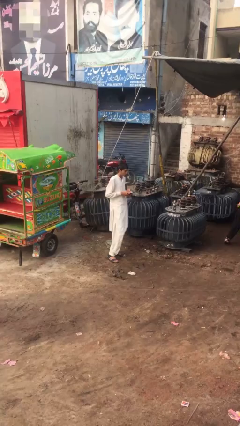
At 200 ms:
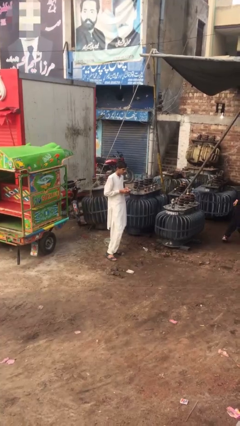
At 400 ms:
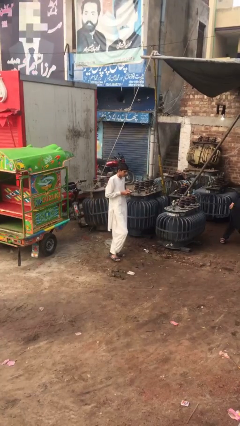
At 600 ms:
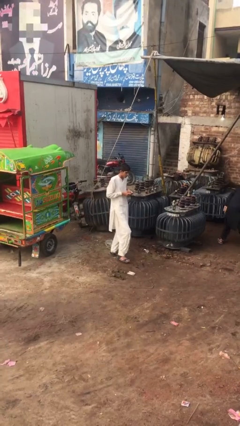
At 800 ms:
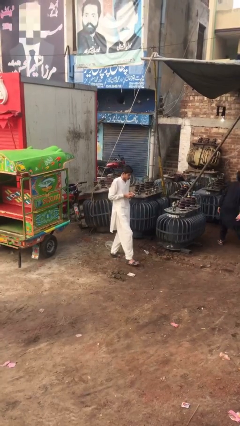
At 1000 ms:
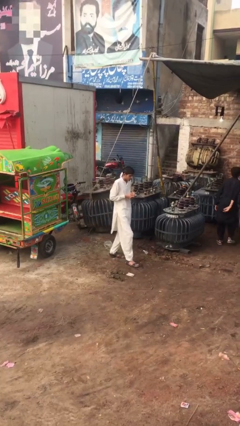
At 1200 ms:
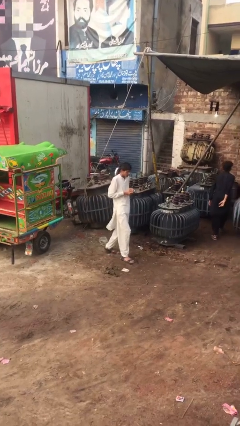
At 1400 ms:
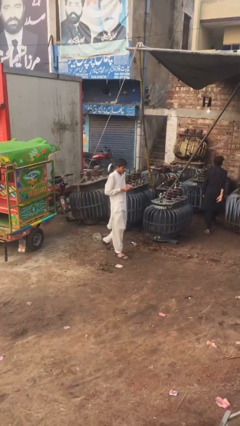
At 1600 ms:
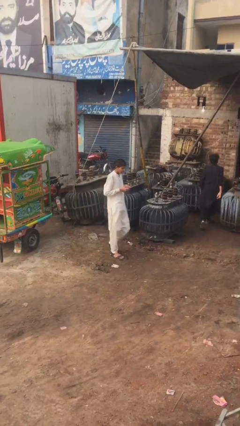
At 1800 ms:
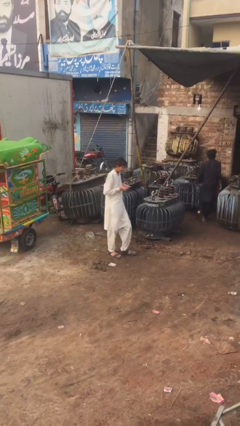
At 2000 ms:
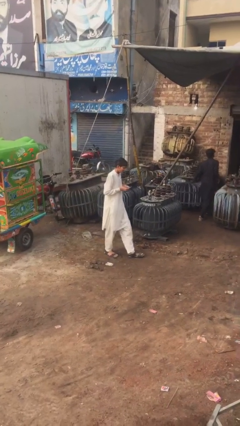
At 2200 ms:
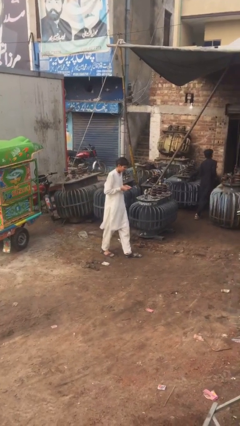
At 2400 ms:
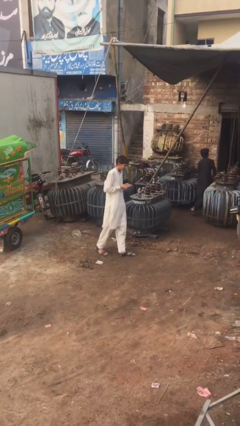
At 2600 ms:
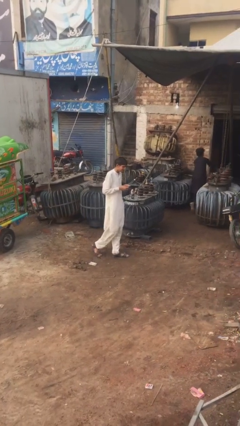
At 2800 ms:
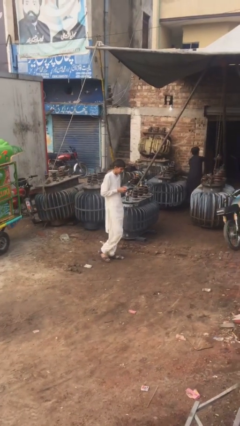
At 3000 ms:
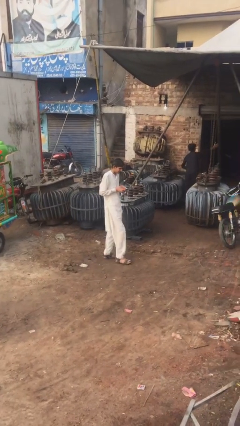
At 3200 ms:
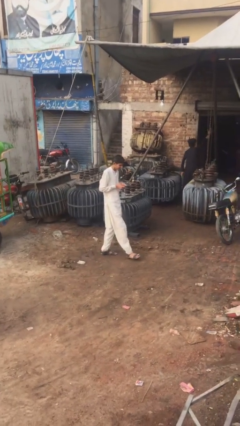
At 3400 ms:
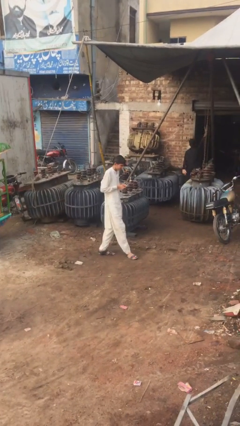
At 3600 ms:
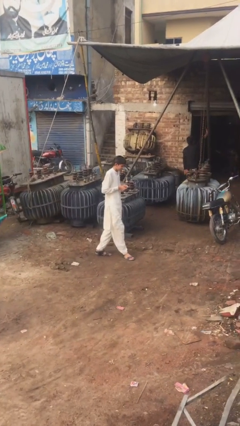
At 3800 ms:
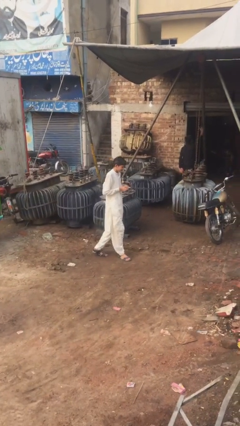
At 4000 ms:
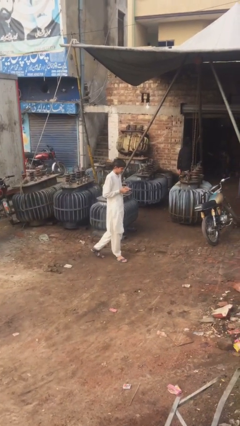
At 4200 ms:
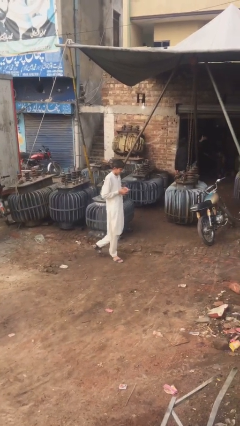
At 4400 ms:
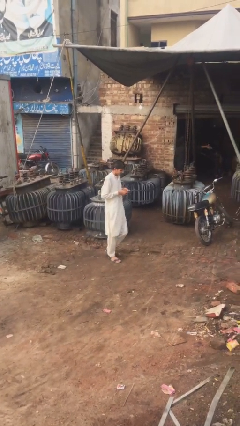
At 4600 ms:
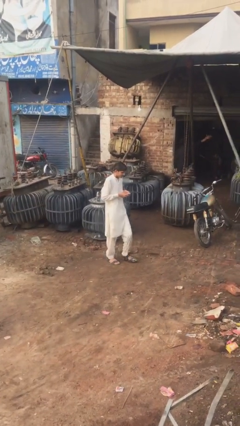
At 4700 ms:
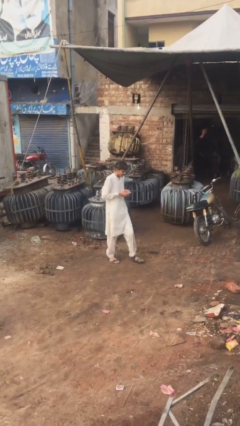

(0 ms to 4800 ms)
person texts on phone

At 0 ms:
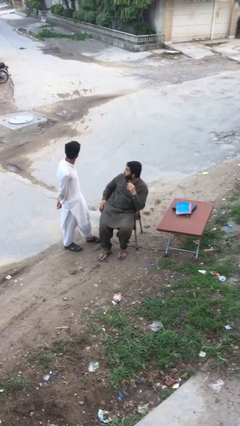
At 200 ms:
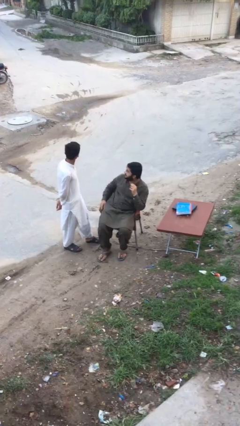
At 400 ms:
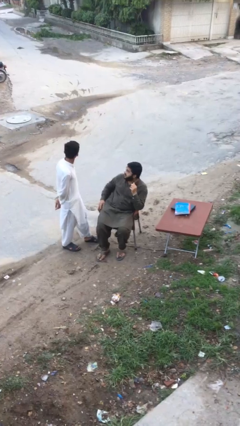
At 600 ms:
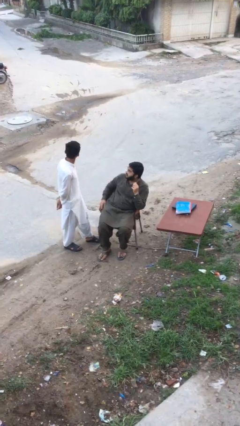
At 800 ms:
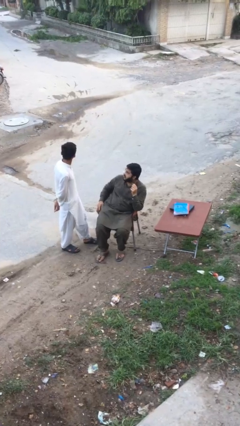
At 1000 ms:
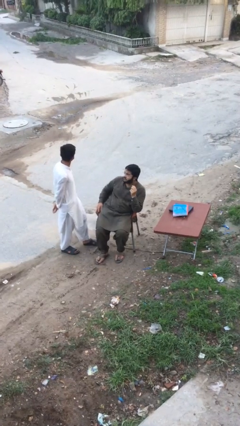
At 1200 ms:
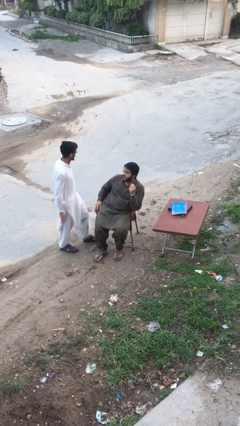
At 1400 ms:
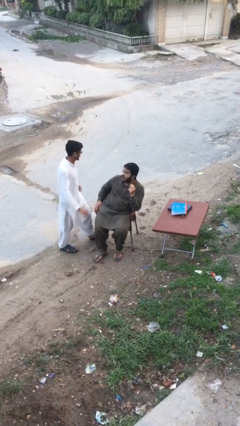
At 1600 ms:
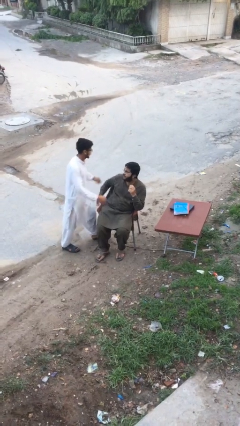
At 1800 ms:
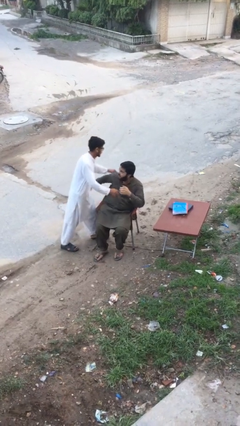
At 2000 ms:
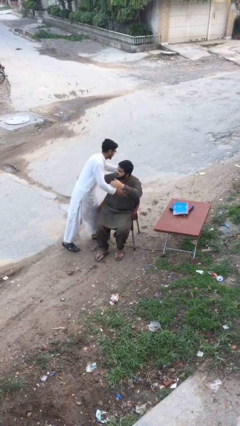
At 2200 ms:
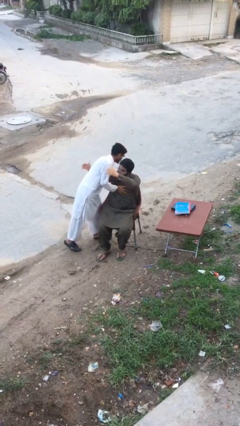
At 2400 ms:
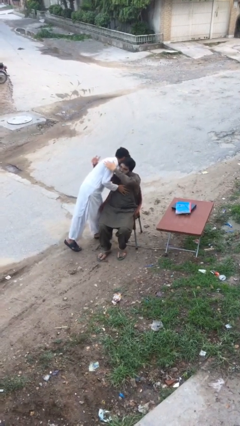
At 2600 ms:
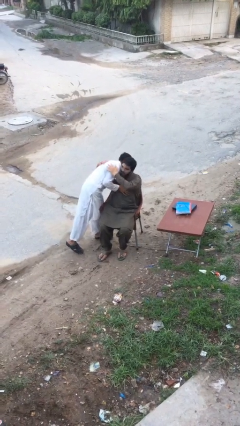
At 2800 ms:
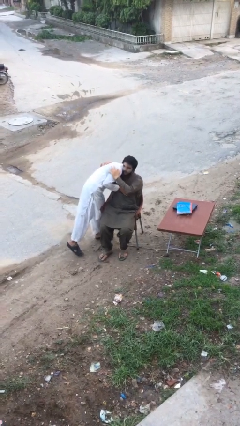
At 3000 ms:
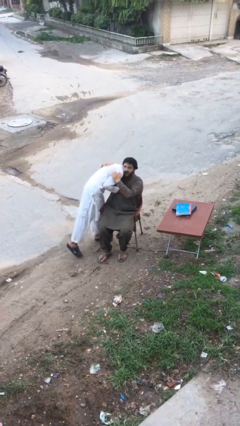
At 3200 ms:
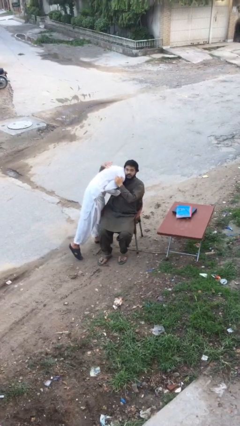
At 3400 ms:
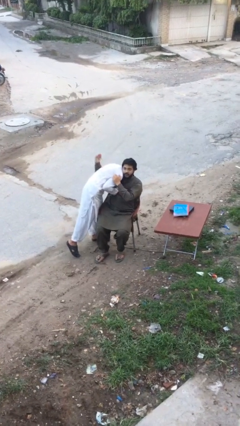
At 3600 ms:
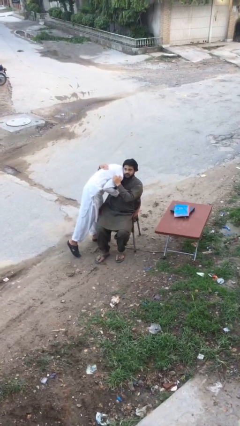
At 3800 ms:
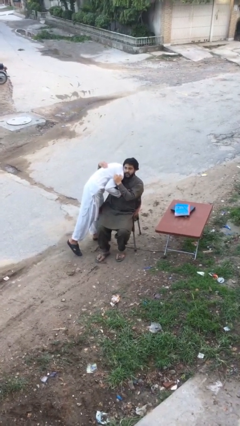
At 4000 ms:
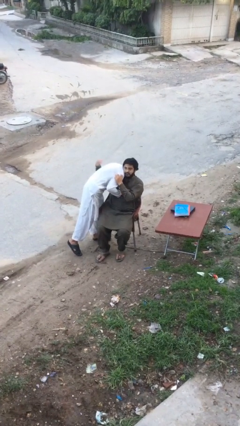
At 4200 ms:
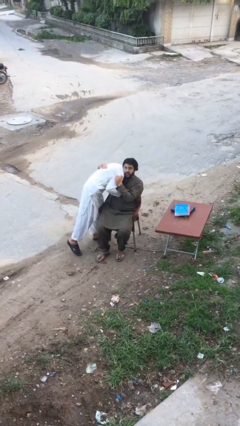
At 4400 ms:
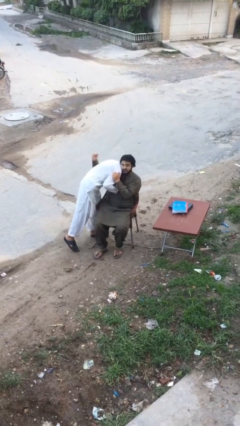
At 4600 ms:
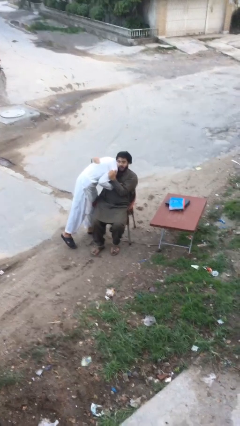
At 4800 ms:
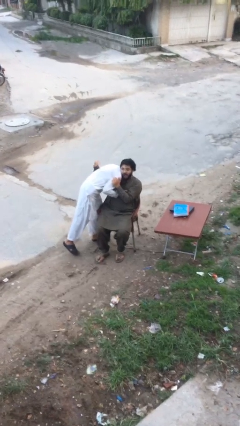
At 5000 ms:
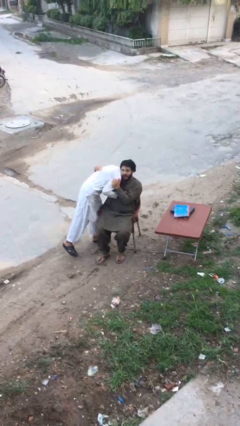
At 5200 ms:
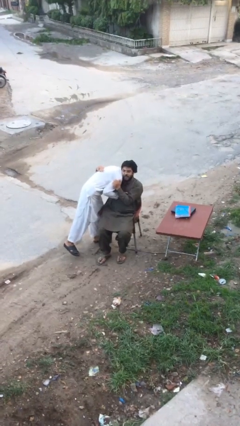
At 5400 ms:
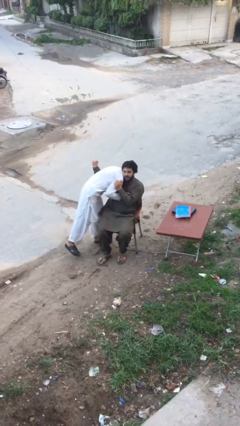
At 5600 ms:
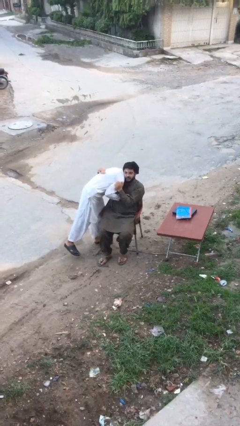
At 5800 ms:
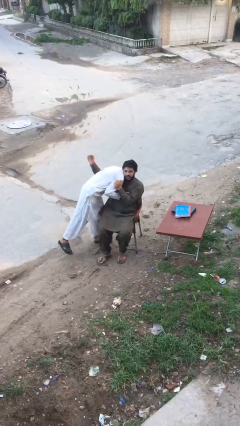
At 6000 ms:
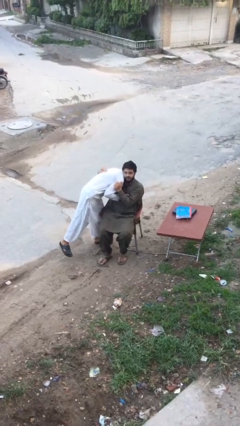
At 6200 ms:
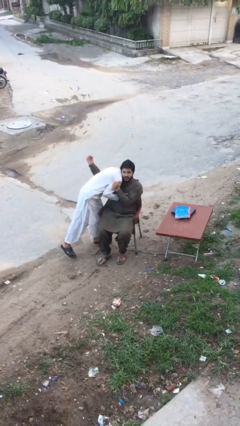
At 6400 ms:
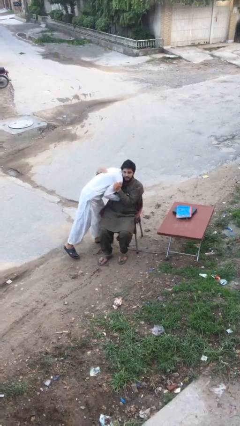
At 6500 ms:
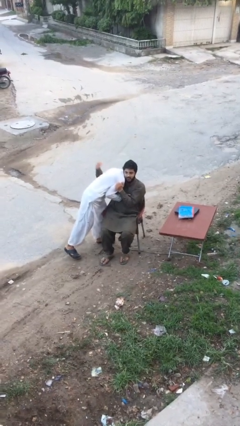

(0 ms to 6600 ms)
person embraces person

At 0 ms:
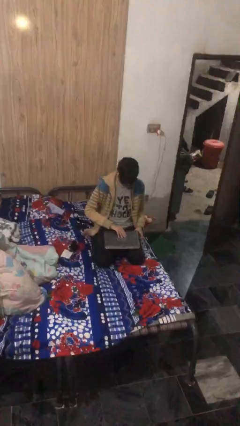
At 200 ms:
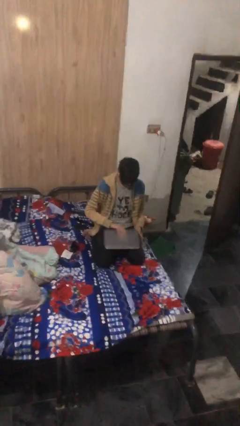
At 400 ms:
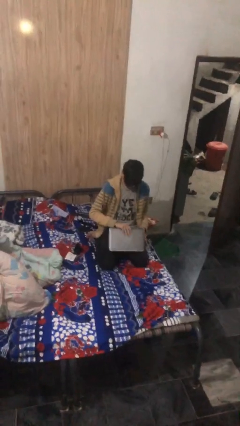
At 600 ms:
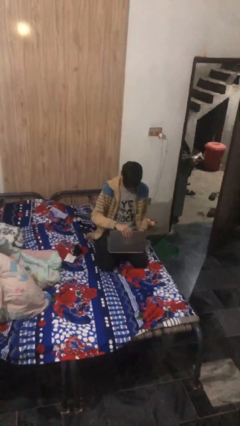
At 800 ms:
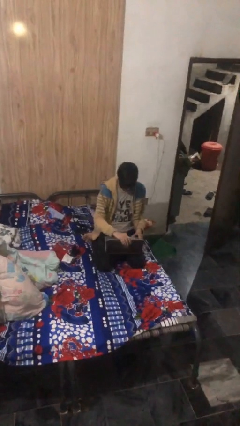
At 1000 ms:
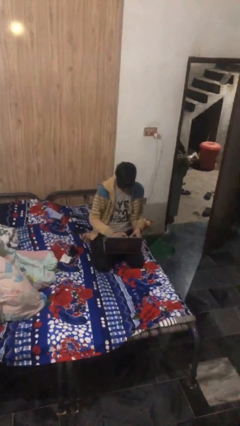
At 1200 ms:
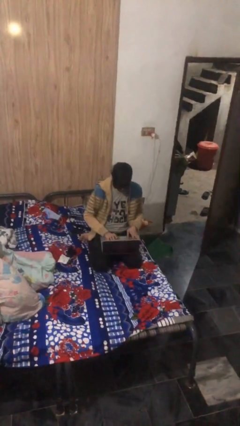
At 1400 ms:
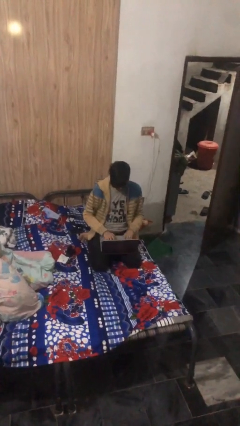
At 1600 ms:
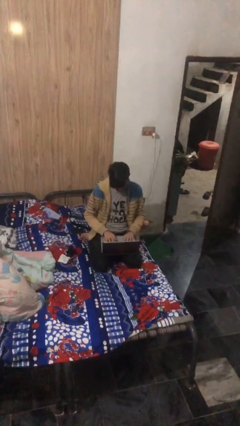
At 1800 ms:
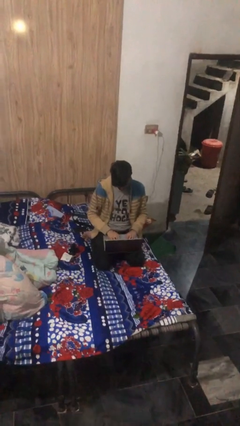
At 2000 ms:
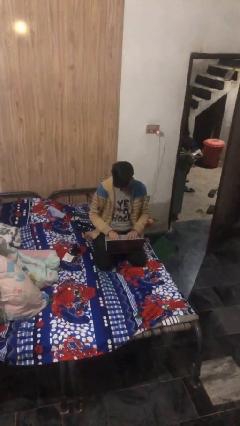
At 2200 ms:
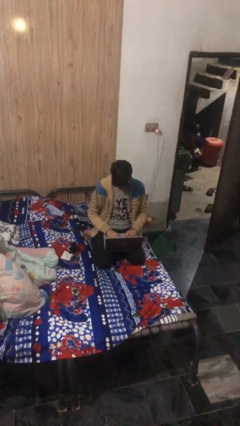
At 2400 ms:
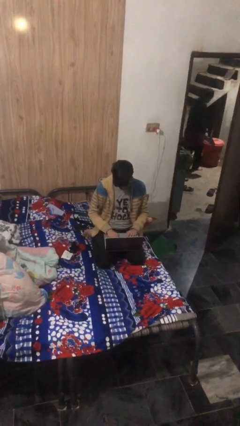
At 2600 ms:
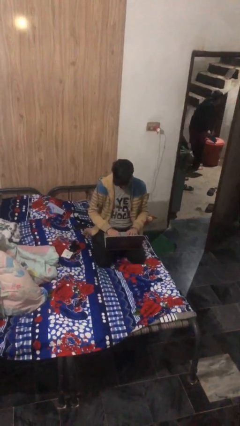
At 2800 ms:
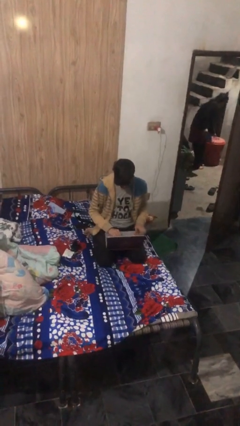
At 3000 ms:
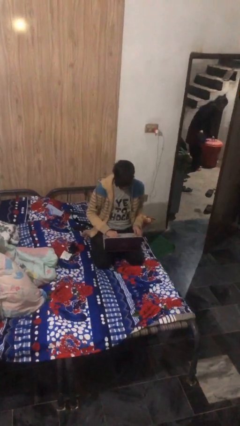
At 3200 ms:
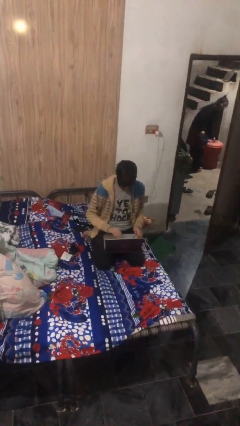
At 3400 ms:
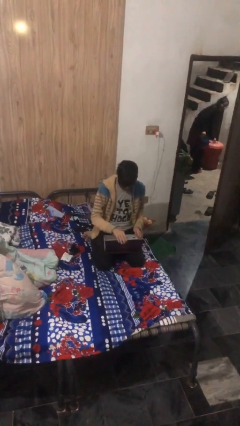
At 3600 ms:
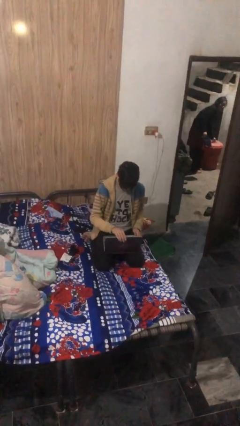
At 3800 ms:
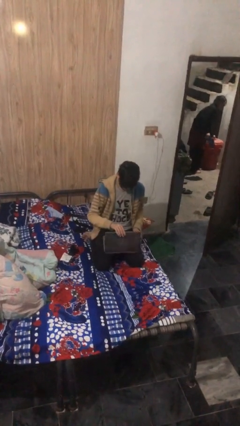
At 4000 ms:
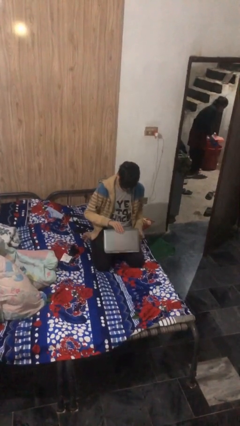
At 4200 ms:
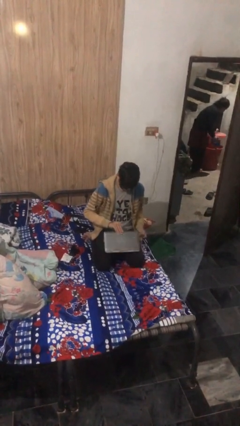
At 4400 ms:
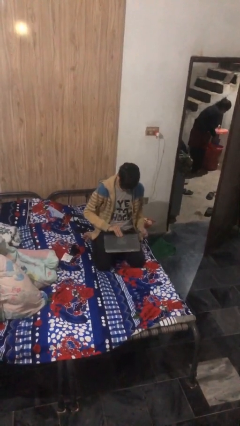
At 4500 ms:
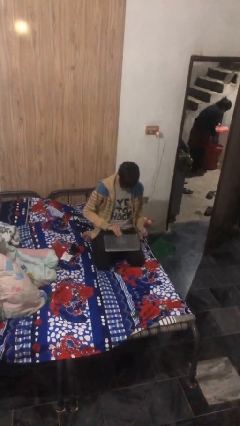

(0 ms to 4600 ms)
person interacts with laptop

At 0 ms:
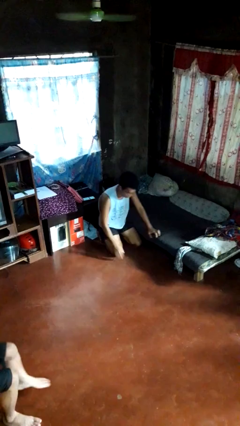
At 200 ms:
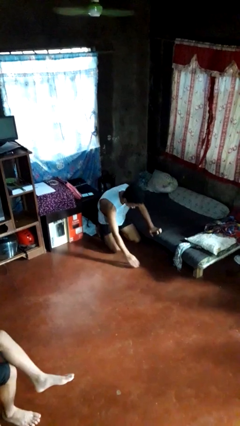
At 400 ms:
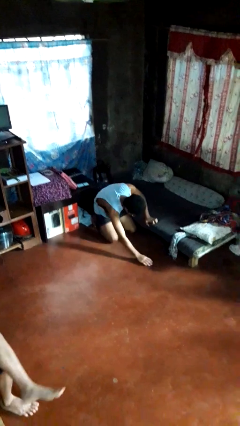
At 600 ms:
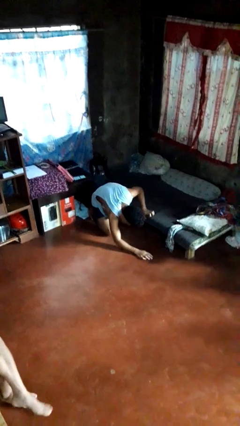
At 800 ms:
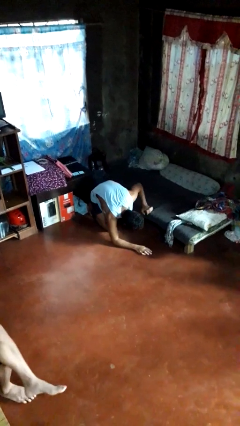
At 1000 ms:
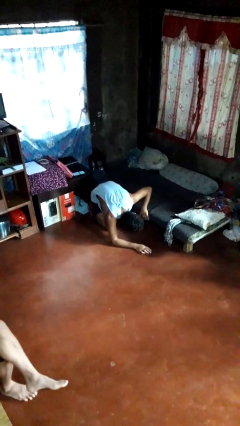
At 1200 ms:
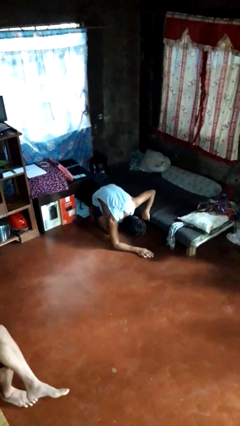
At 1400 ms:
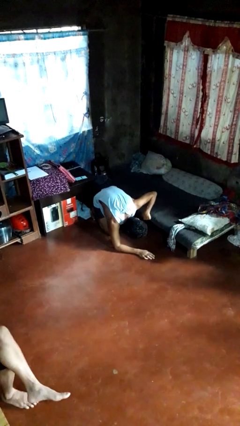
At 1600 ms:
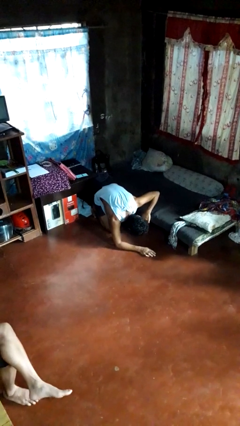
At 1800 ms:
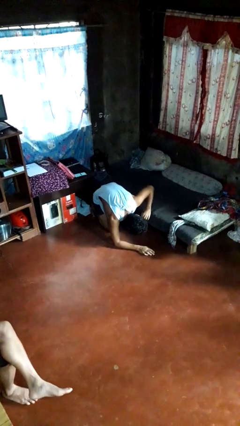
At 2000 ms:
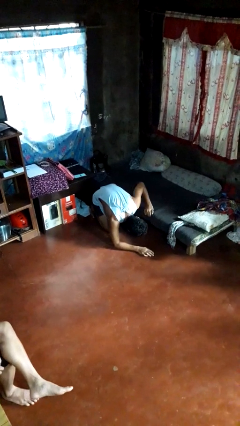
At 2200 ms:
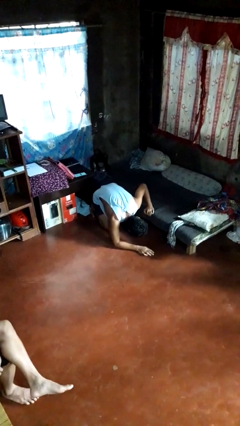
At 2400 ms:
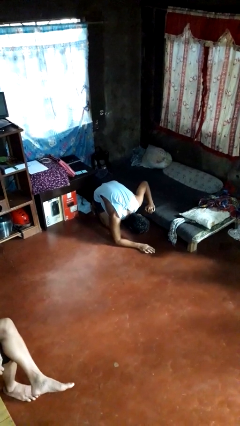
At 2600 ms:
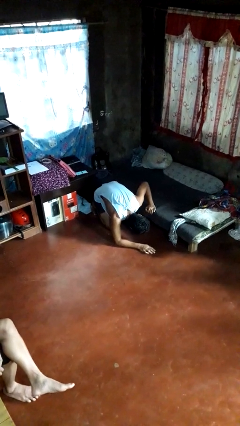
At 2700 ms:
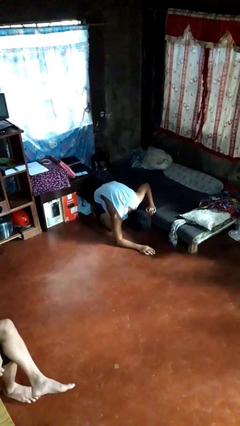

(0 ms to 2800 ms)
person searches under bed
